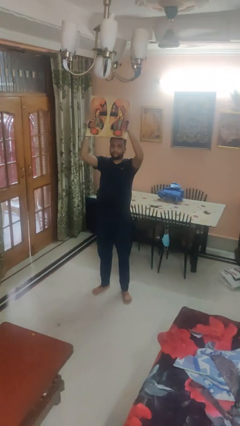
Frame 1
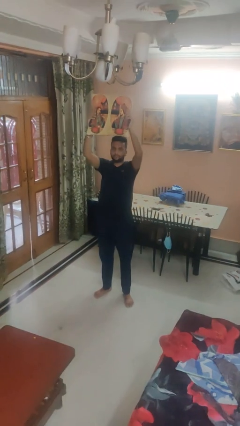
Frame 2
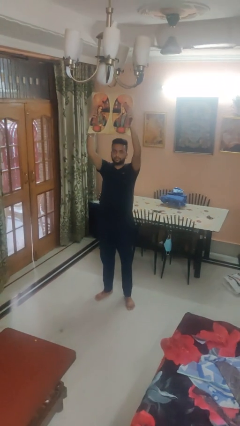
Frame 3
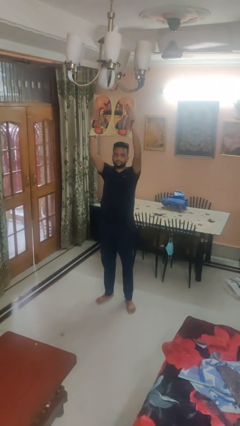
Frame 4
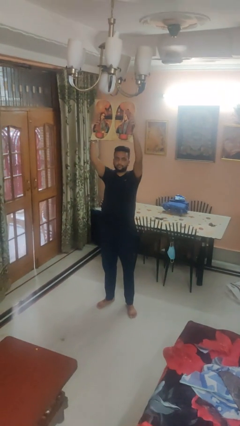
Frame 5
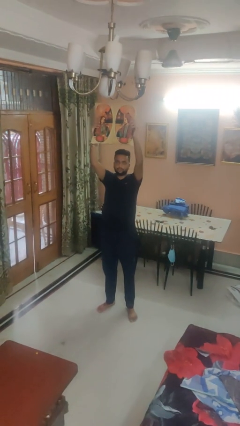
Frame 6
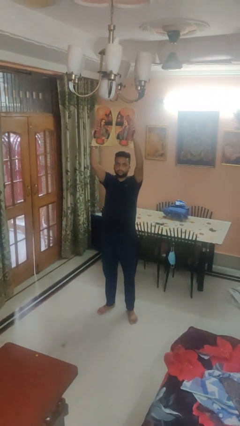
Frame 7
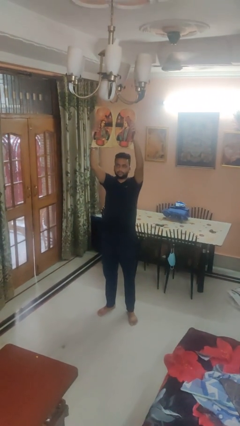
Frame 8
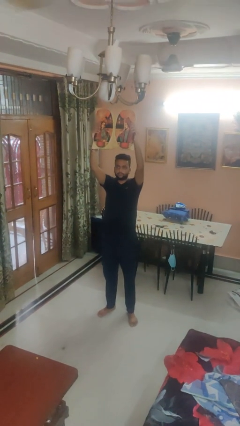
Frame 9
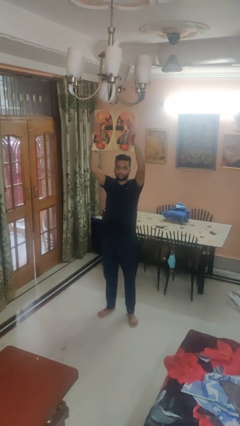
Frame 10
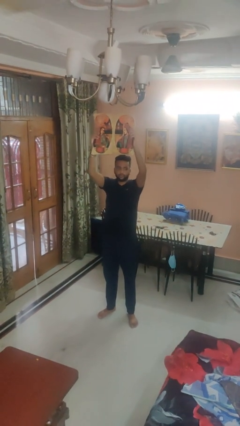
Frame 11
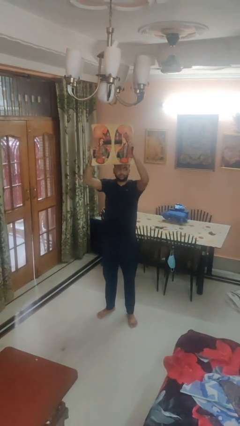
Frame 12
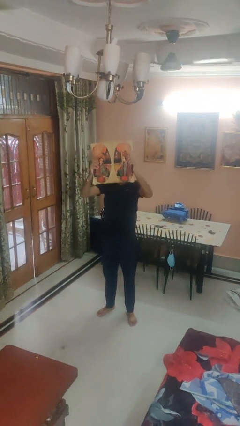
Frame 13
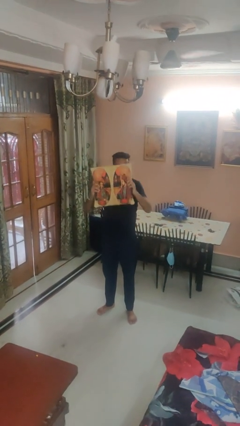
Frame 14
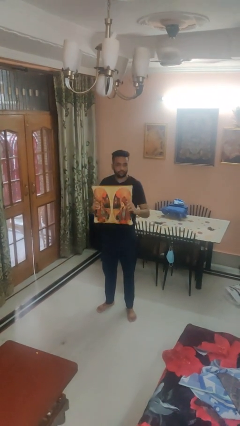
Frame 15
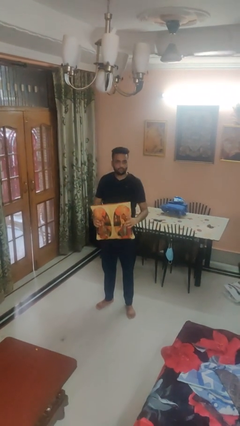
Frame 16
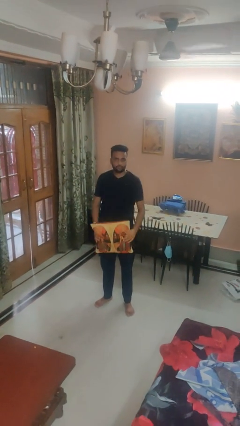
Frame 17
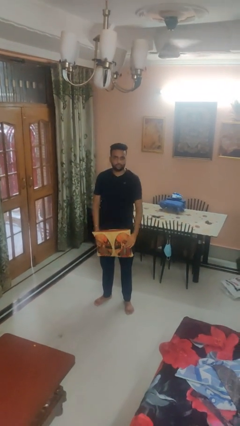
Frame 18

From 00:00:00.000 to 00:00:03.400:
person holds object above head

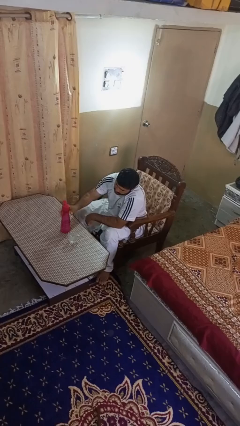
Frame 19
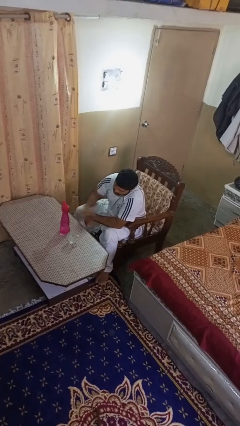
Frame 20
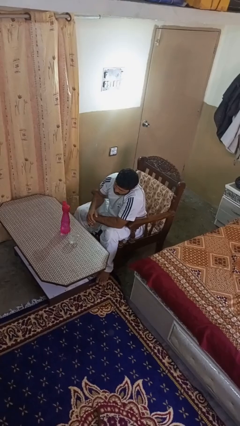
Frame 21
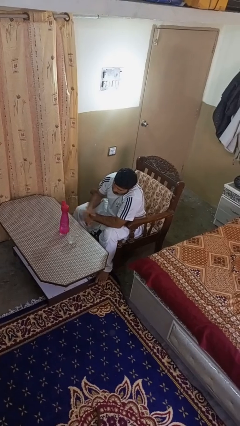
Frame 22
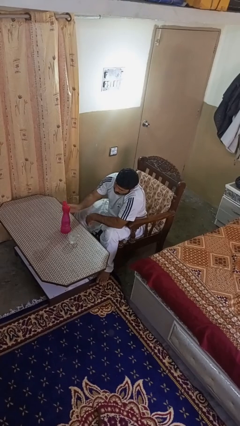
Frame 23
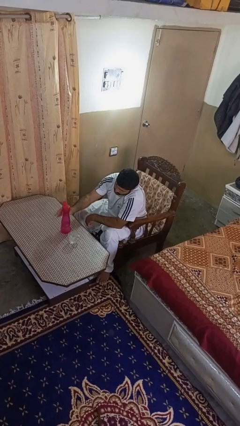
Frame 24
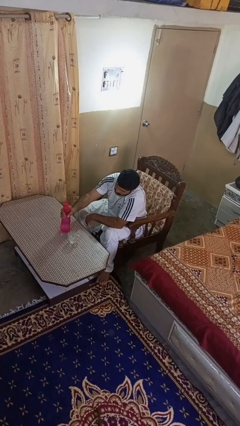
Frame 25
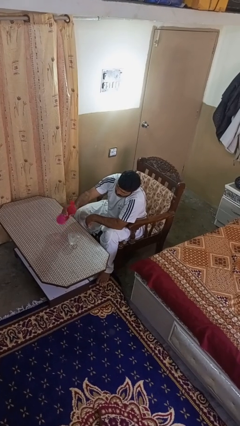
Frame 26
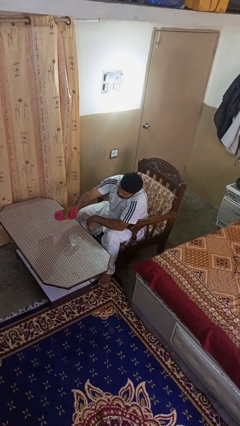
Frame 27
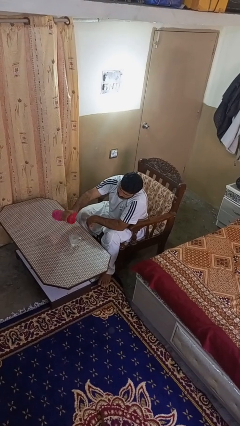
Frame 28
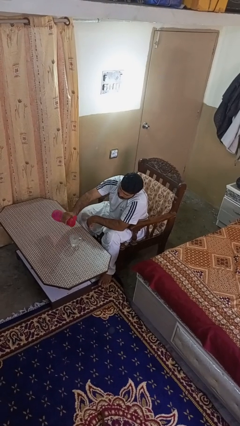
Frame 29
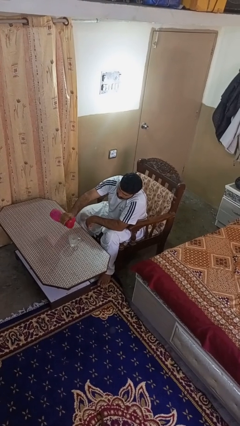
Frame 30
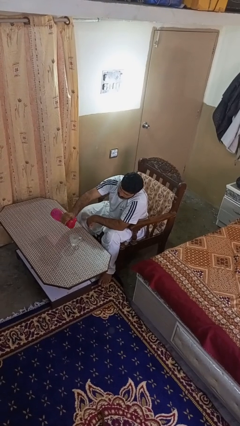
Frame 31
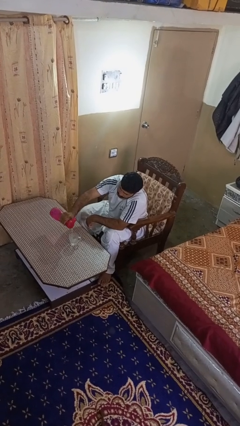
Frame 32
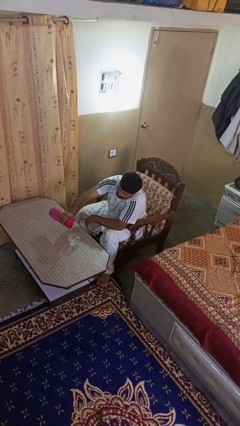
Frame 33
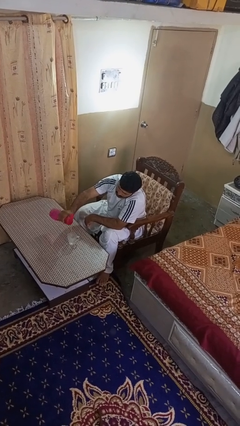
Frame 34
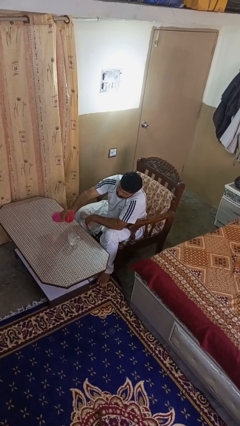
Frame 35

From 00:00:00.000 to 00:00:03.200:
person pours liquid into cup

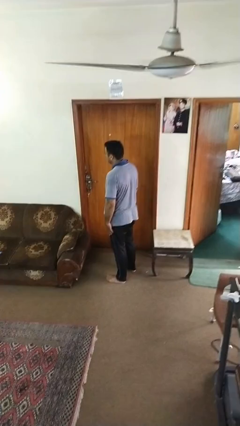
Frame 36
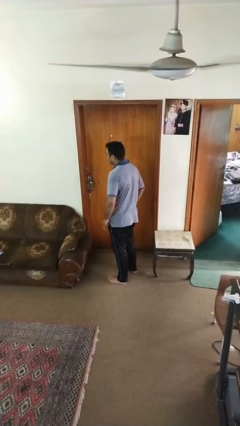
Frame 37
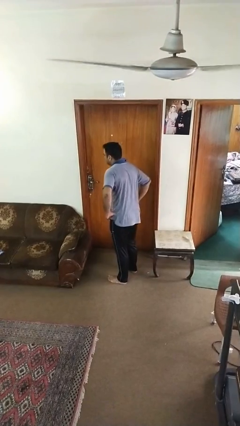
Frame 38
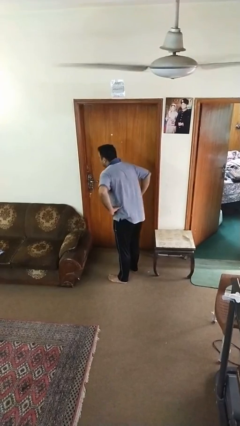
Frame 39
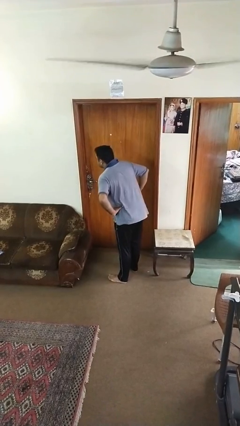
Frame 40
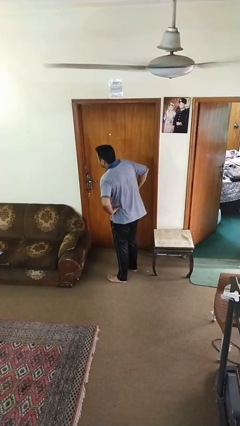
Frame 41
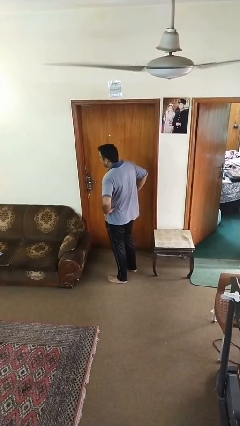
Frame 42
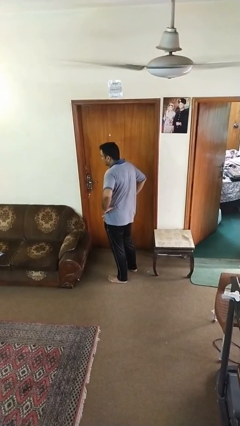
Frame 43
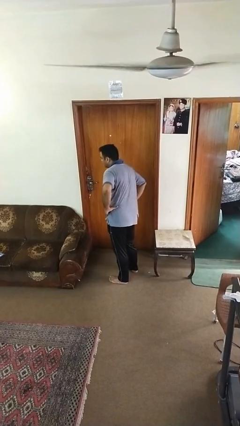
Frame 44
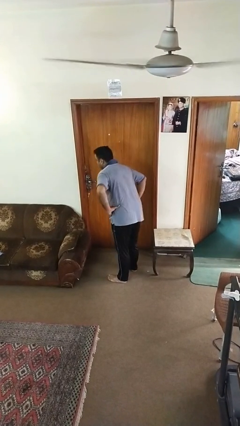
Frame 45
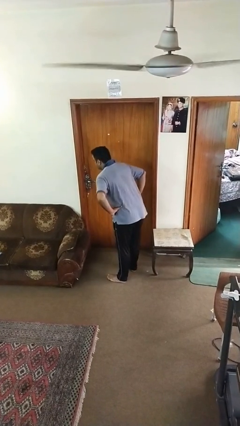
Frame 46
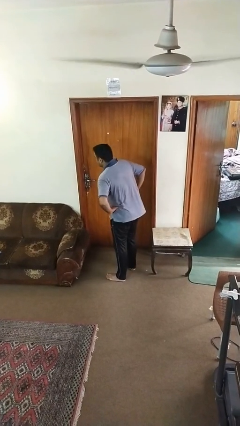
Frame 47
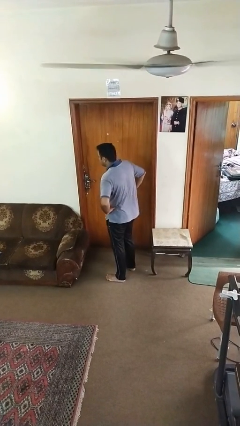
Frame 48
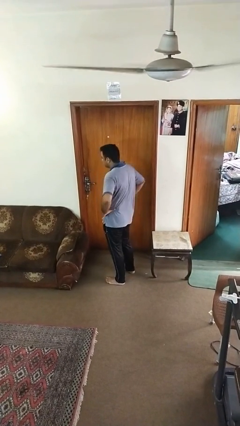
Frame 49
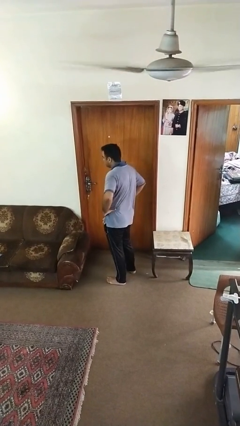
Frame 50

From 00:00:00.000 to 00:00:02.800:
person wiggles hips

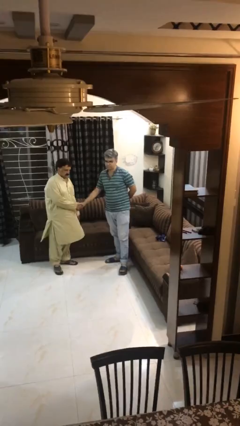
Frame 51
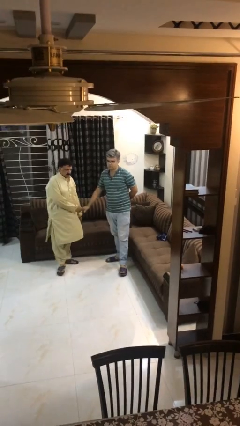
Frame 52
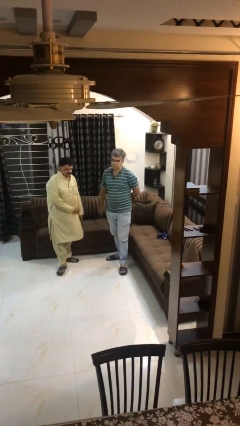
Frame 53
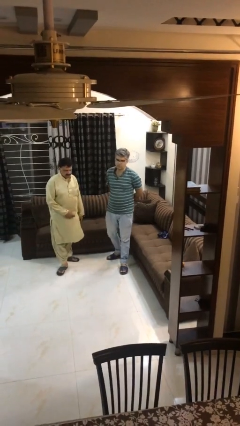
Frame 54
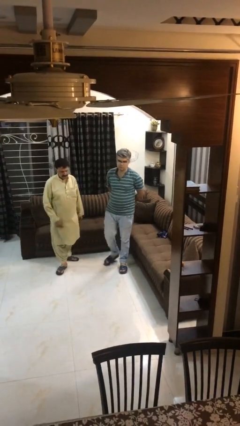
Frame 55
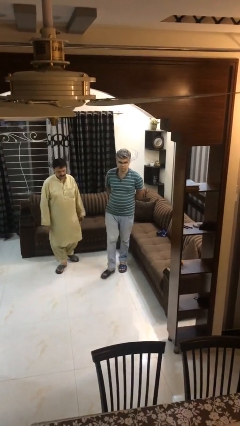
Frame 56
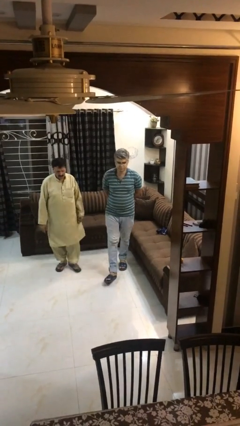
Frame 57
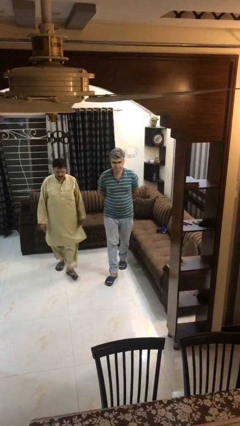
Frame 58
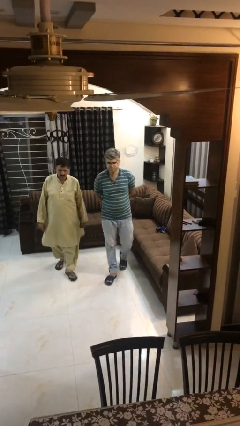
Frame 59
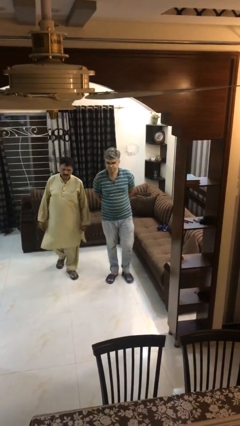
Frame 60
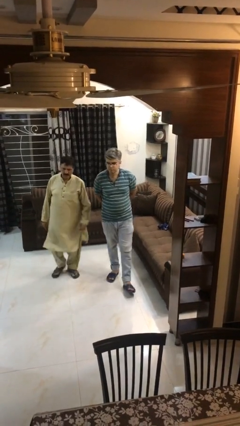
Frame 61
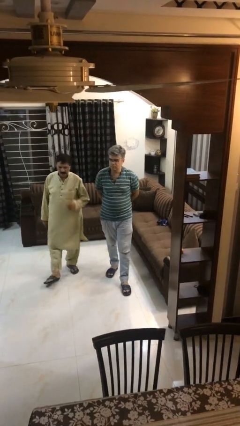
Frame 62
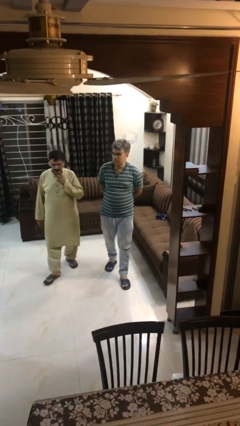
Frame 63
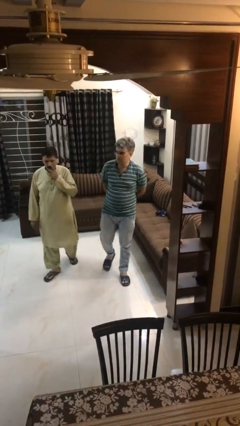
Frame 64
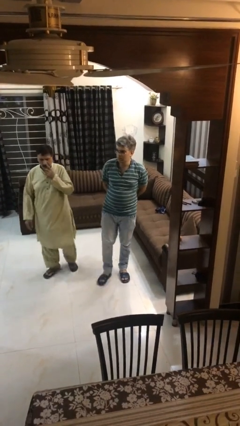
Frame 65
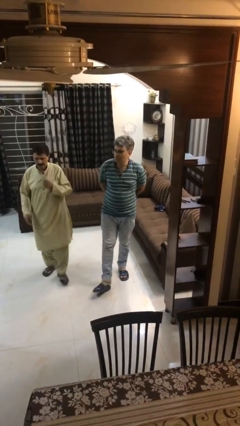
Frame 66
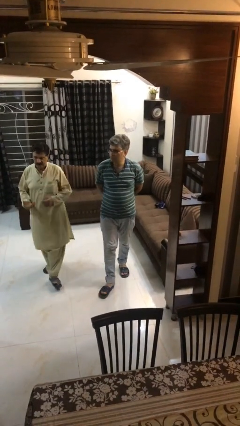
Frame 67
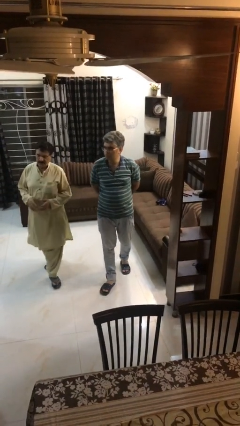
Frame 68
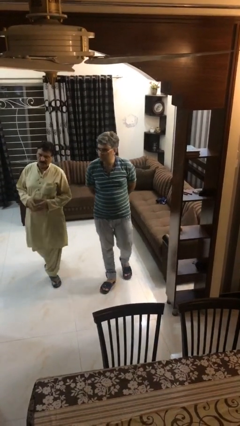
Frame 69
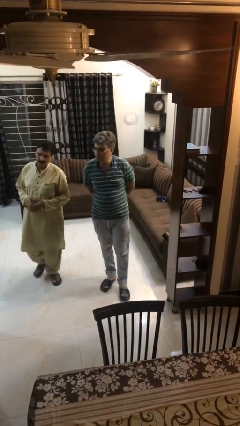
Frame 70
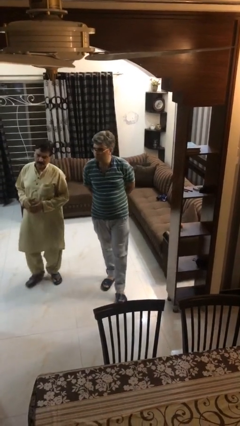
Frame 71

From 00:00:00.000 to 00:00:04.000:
person talks to person

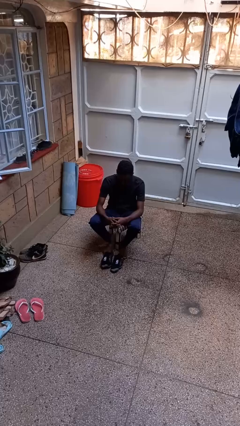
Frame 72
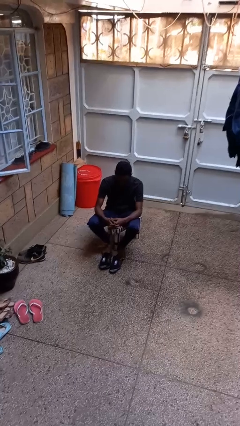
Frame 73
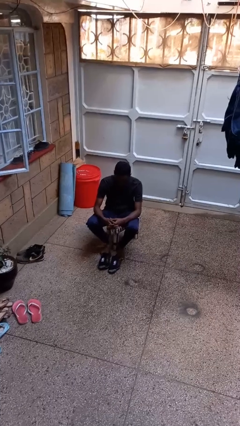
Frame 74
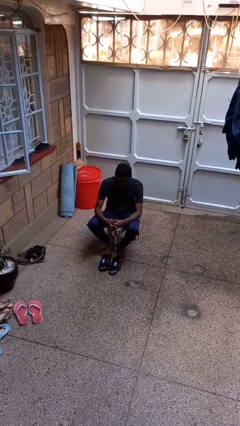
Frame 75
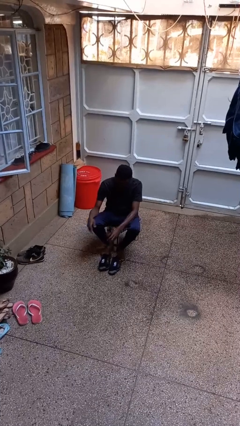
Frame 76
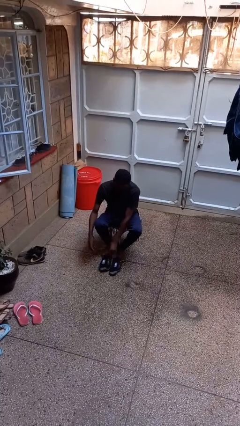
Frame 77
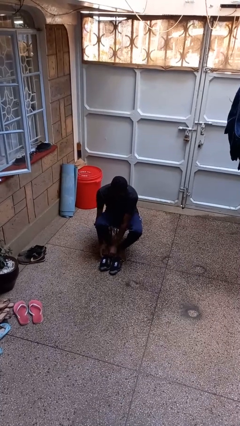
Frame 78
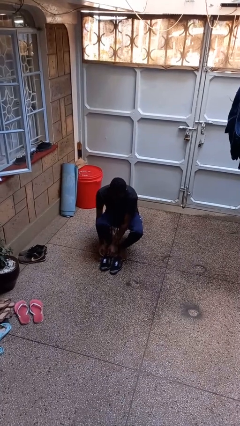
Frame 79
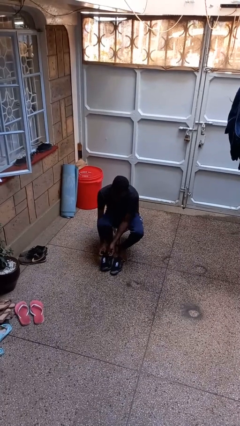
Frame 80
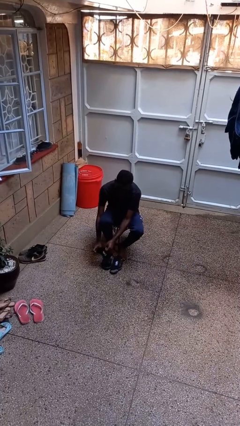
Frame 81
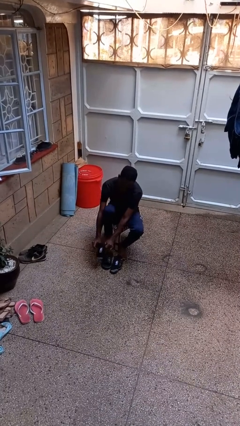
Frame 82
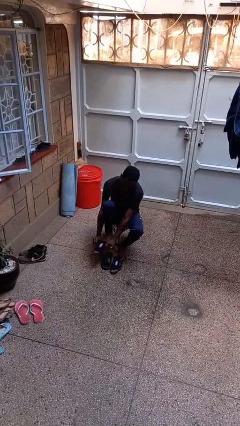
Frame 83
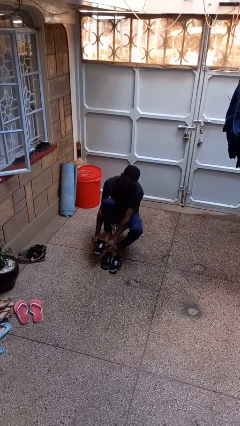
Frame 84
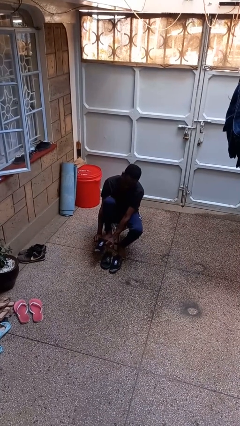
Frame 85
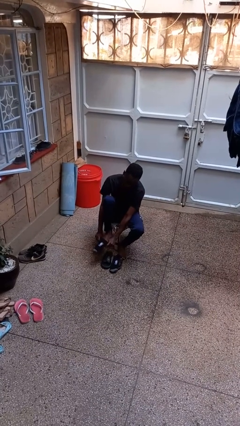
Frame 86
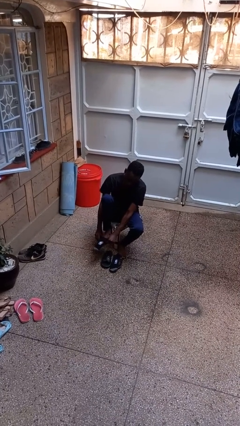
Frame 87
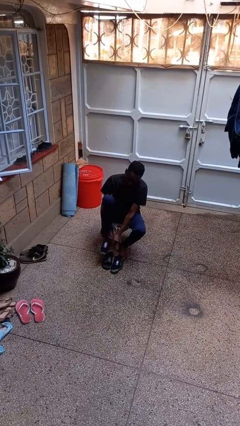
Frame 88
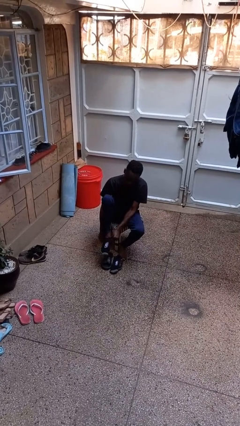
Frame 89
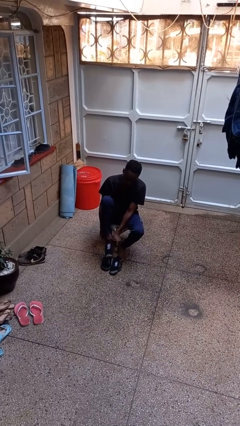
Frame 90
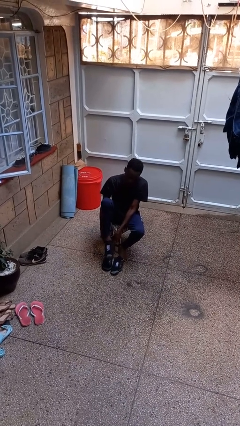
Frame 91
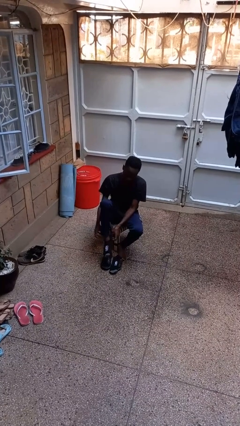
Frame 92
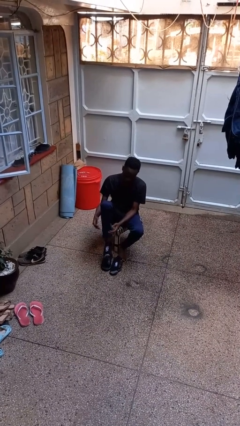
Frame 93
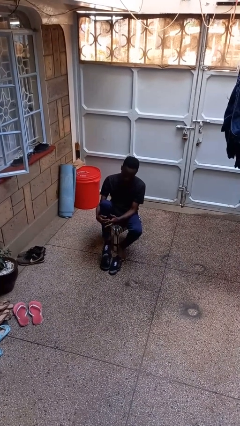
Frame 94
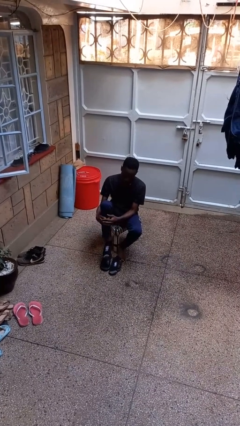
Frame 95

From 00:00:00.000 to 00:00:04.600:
person puts on socks
